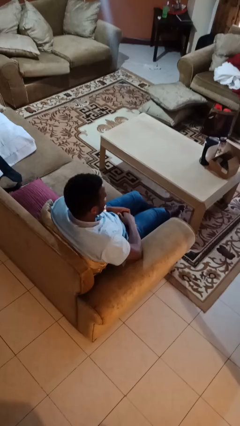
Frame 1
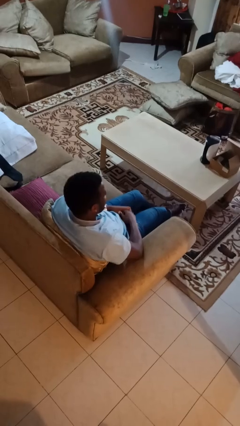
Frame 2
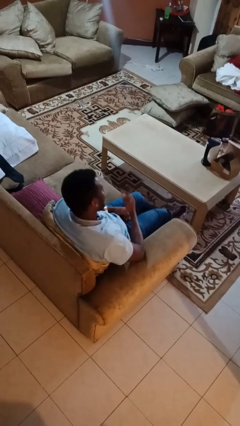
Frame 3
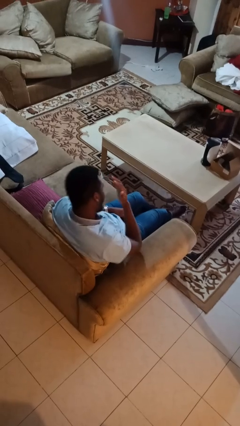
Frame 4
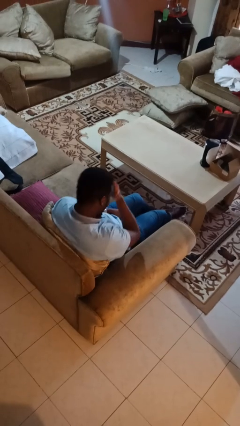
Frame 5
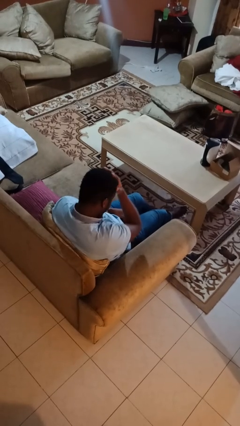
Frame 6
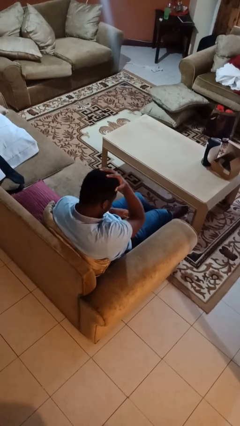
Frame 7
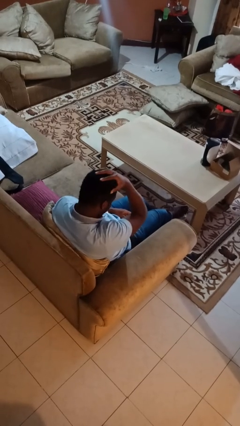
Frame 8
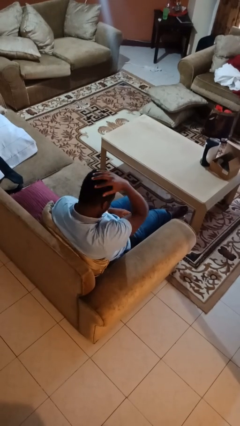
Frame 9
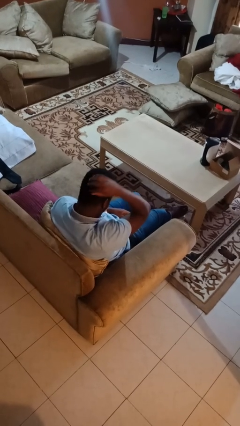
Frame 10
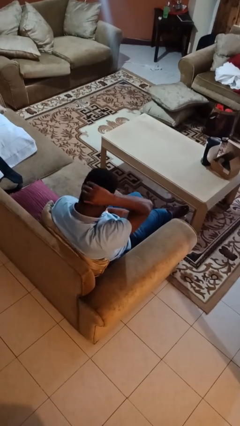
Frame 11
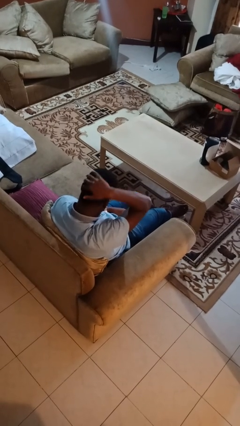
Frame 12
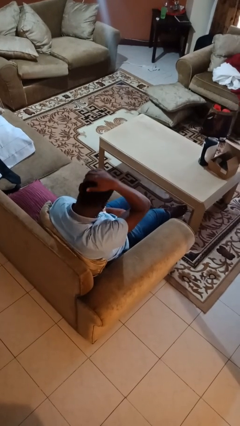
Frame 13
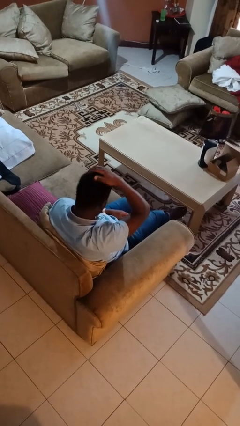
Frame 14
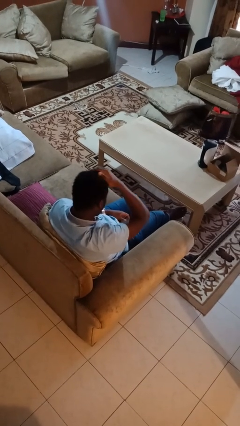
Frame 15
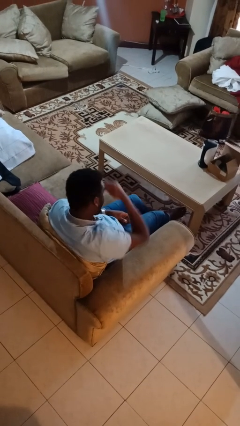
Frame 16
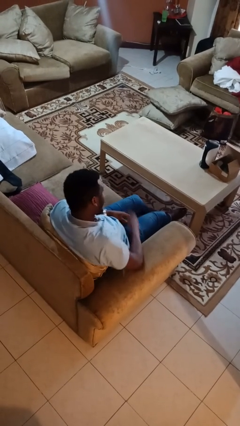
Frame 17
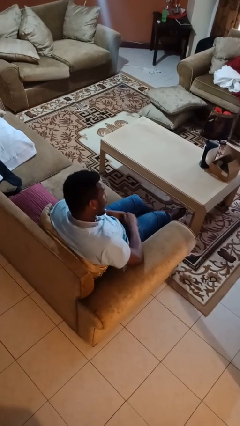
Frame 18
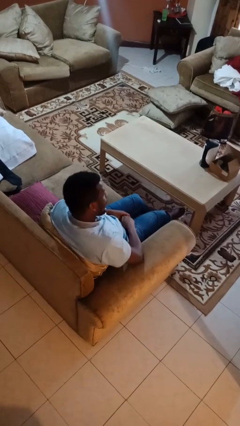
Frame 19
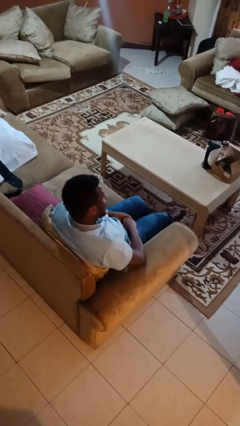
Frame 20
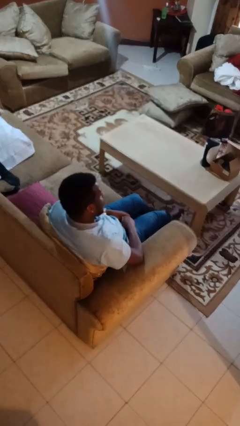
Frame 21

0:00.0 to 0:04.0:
person strokes hair

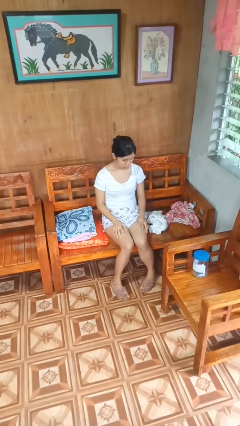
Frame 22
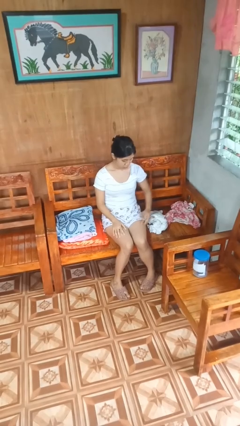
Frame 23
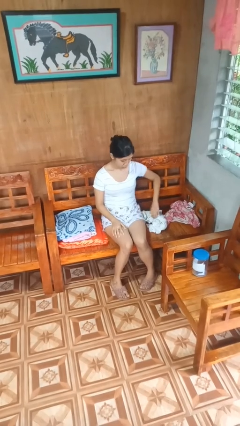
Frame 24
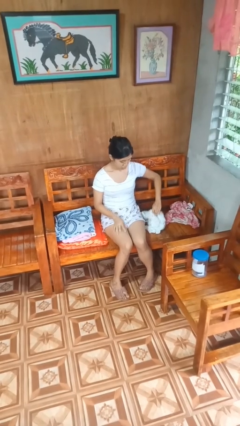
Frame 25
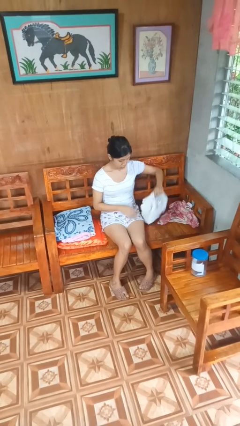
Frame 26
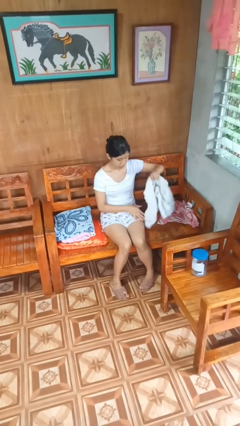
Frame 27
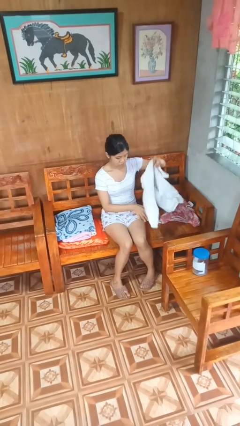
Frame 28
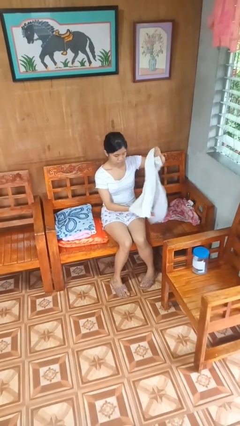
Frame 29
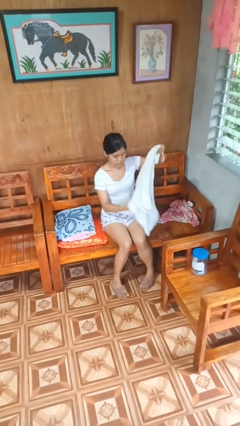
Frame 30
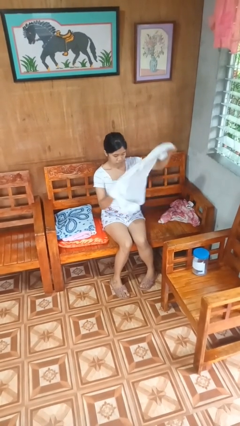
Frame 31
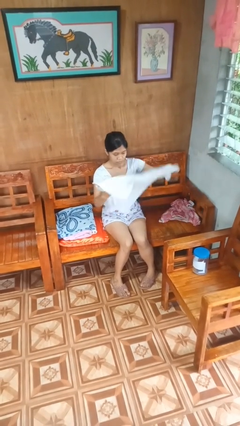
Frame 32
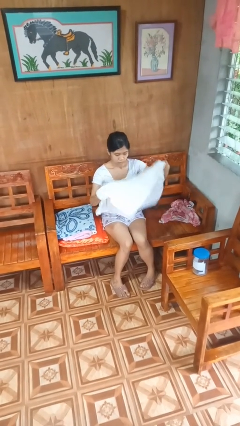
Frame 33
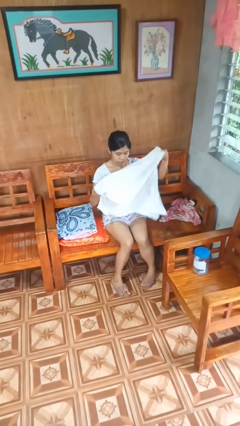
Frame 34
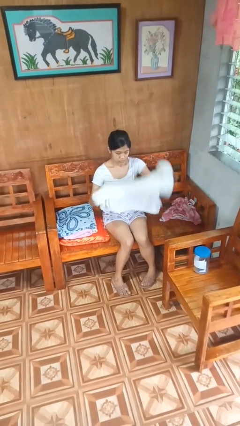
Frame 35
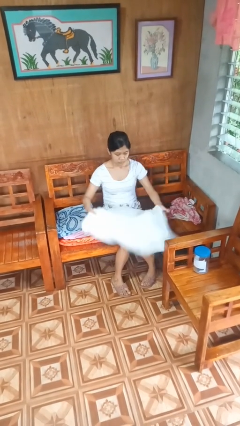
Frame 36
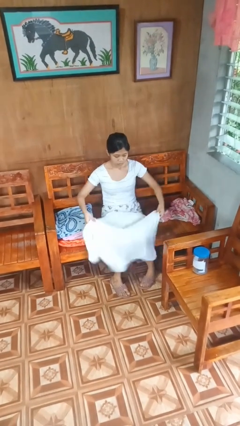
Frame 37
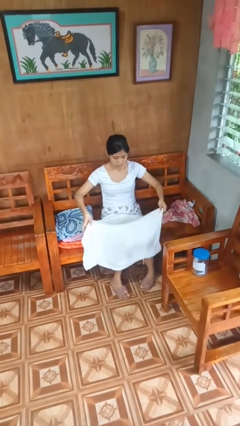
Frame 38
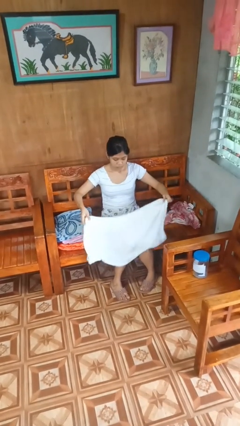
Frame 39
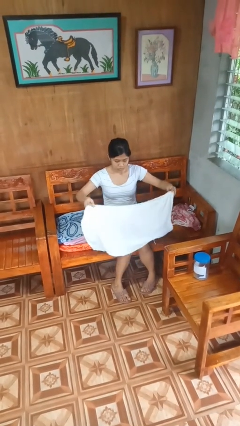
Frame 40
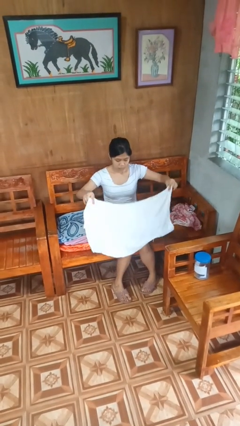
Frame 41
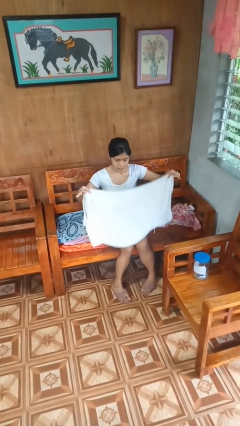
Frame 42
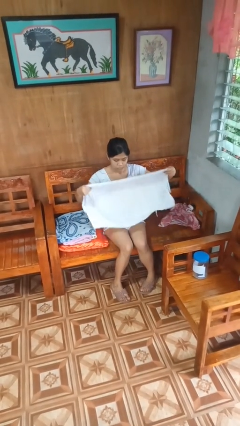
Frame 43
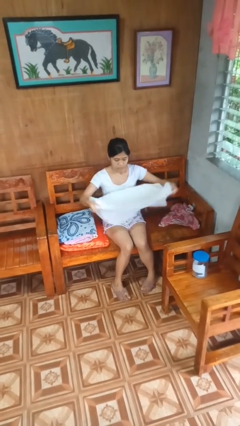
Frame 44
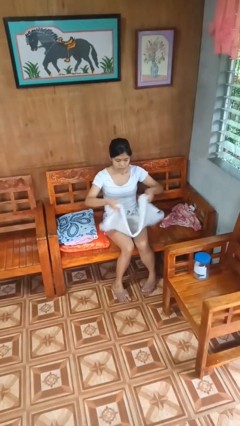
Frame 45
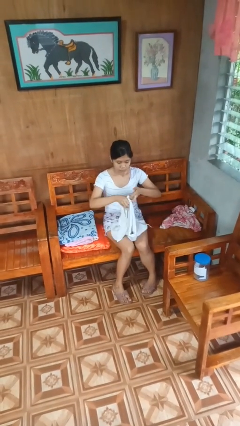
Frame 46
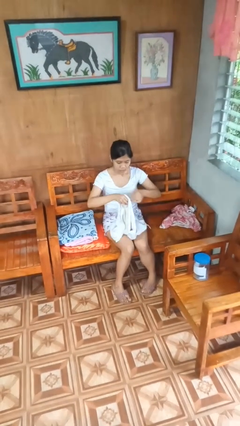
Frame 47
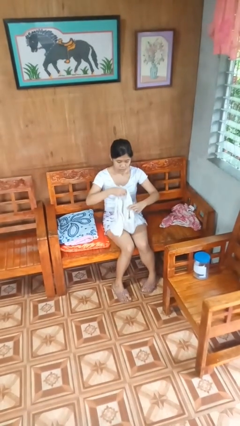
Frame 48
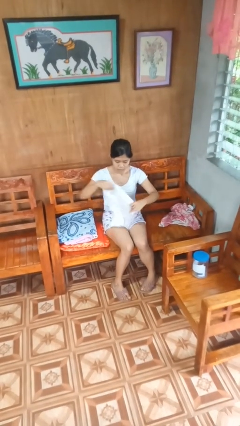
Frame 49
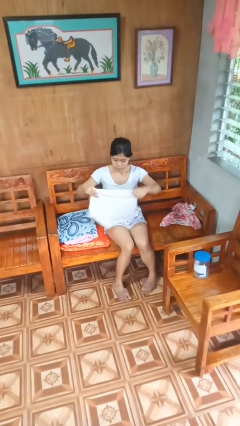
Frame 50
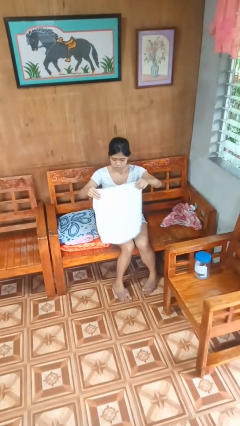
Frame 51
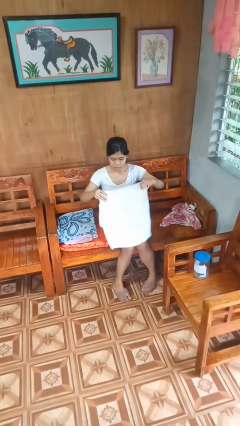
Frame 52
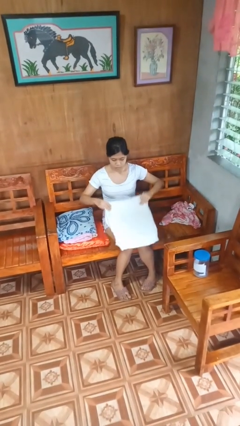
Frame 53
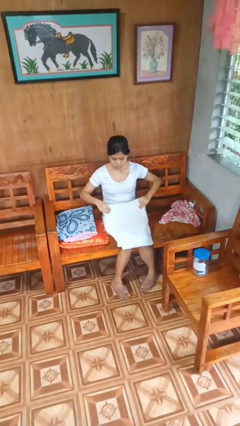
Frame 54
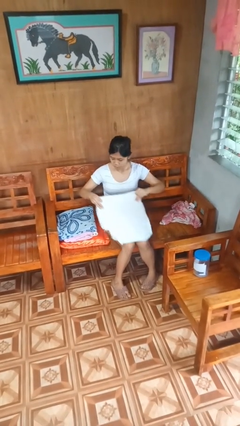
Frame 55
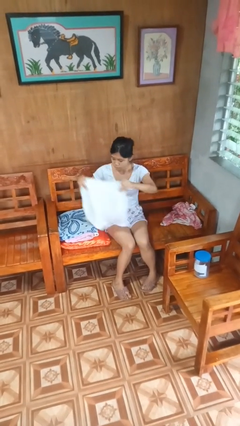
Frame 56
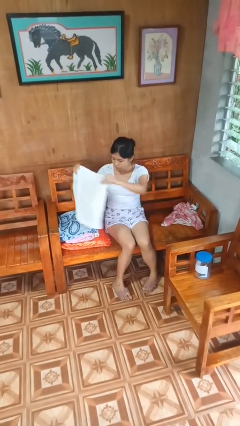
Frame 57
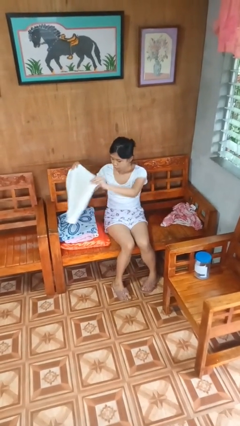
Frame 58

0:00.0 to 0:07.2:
person folds towel

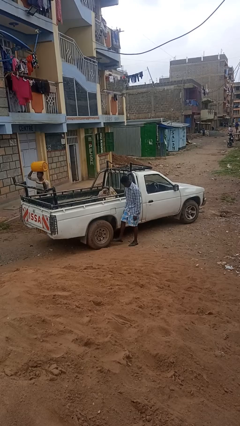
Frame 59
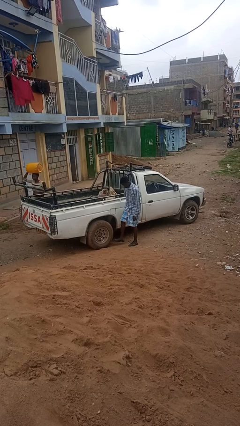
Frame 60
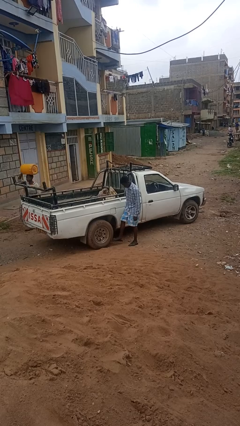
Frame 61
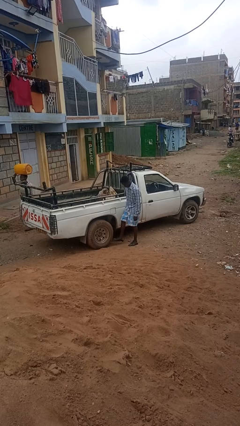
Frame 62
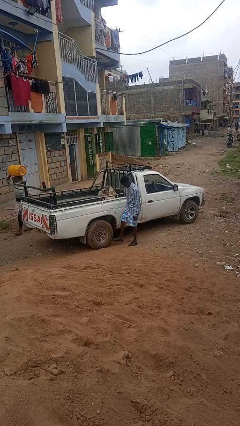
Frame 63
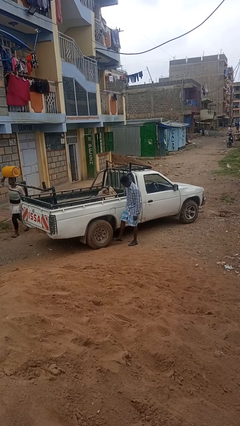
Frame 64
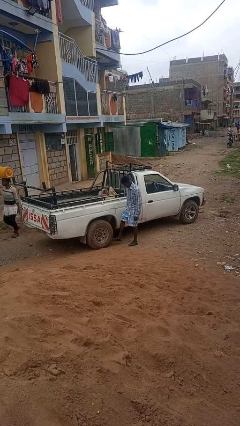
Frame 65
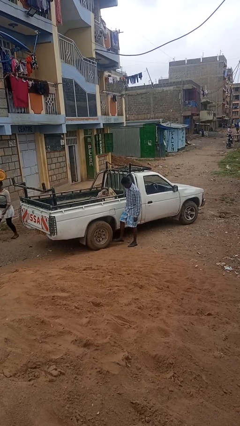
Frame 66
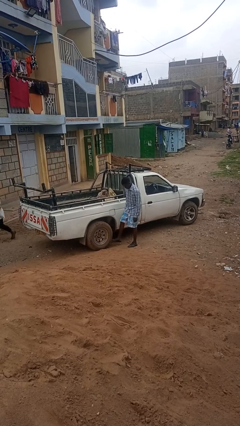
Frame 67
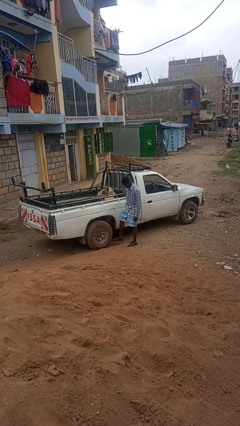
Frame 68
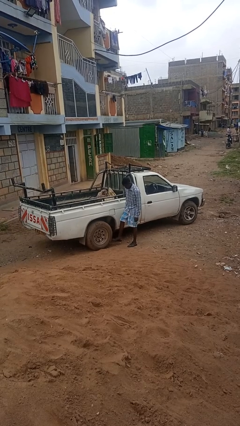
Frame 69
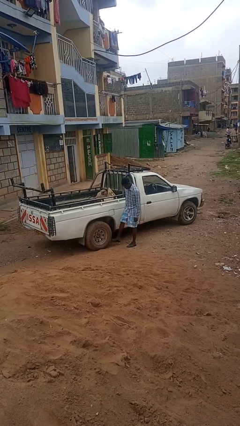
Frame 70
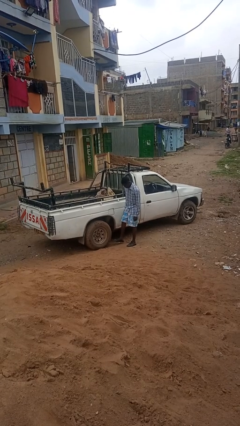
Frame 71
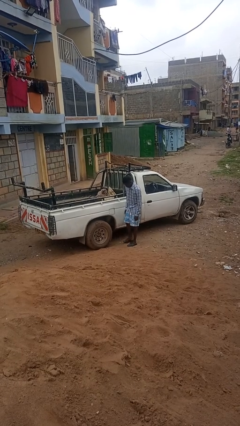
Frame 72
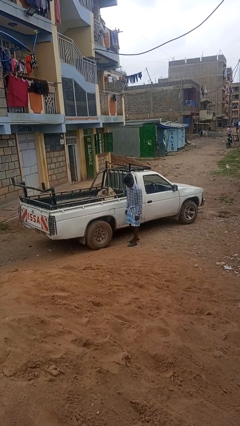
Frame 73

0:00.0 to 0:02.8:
person kicks car tires

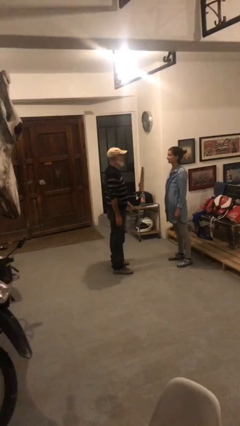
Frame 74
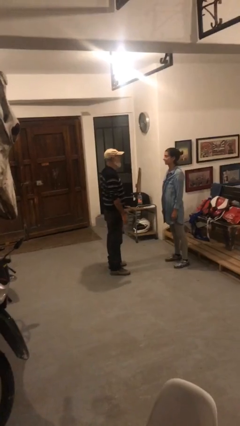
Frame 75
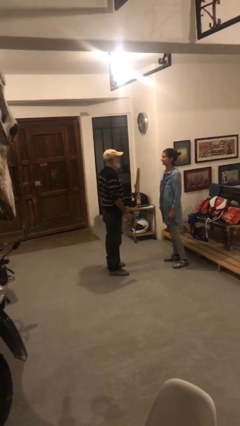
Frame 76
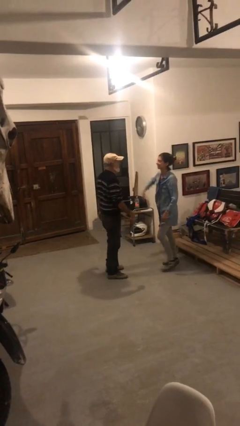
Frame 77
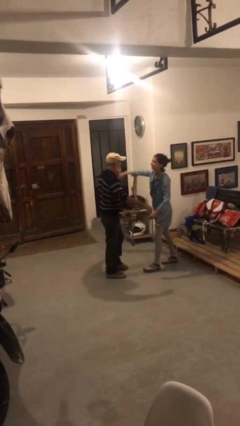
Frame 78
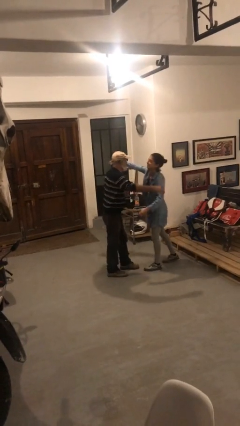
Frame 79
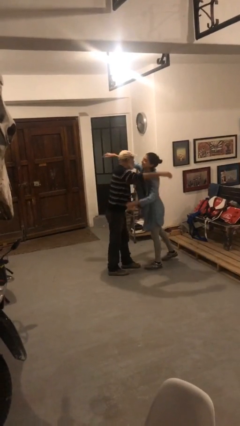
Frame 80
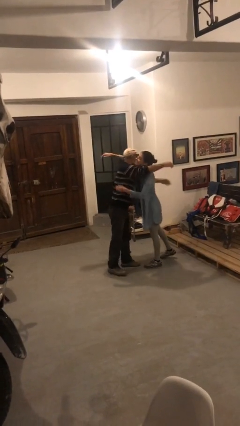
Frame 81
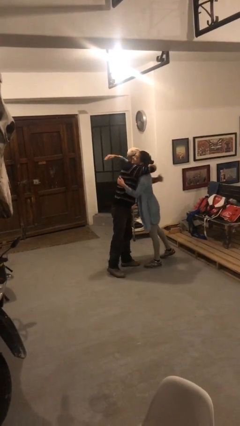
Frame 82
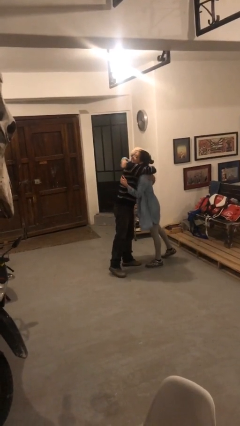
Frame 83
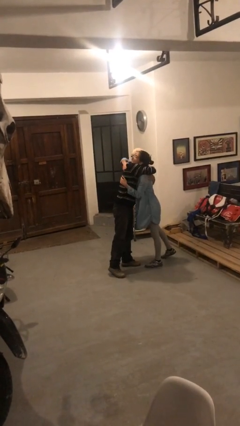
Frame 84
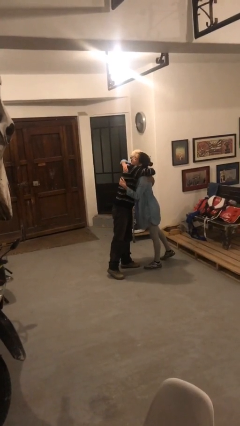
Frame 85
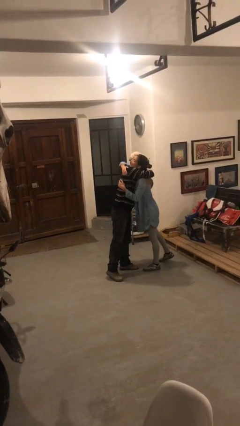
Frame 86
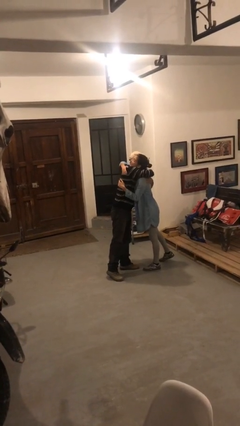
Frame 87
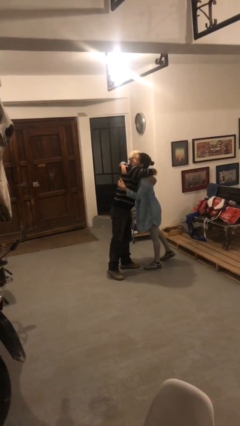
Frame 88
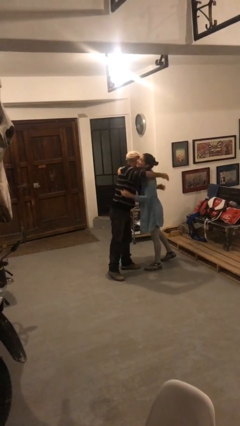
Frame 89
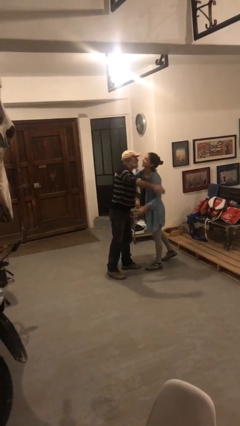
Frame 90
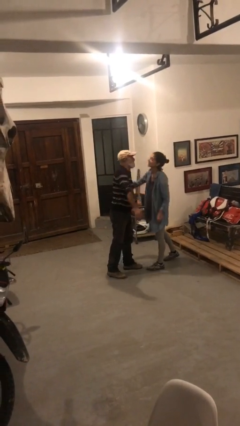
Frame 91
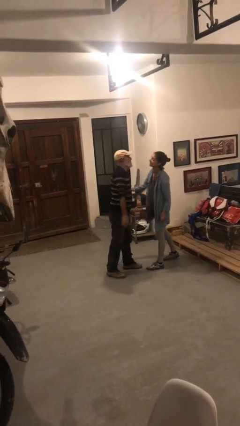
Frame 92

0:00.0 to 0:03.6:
person embraces person
